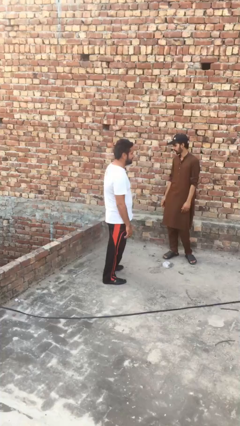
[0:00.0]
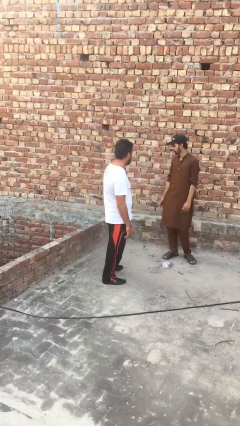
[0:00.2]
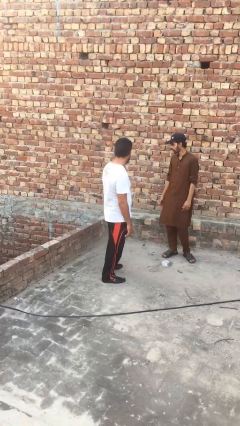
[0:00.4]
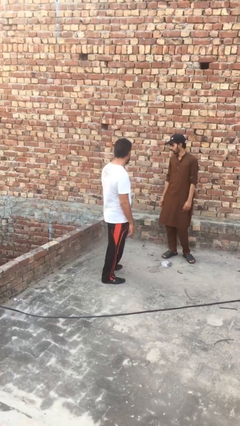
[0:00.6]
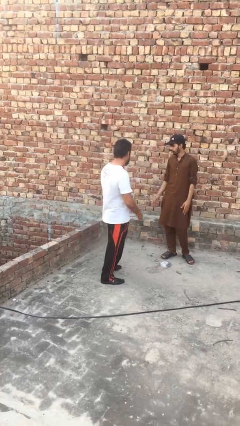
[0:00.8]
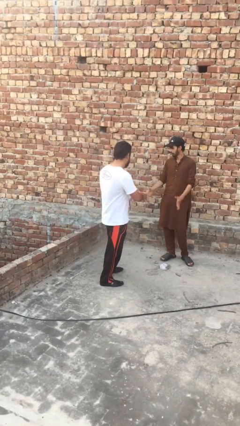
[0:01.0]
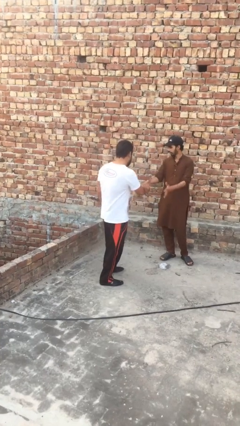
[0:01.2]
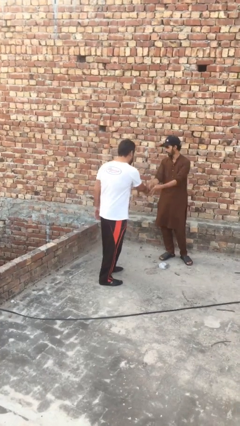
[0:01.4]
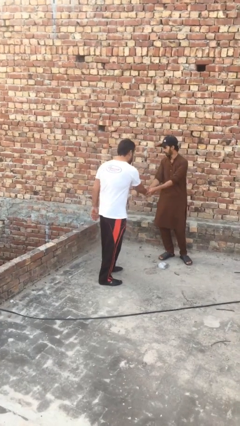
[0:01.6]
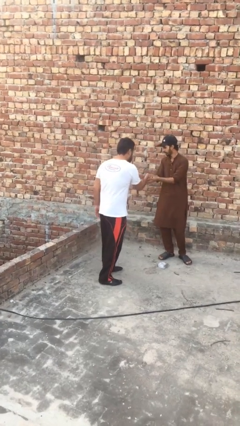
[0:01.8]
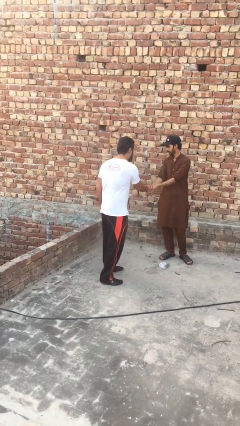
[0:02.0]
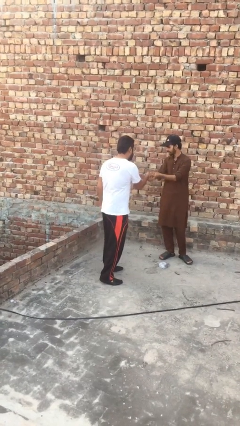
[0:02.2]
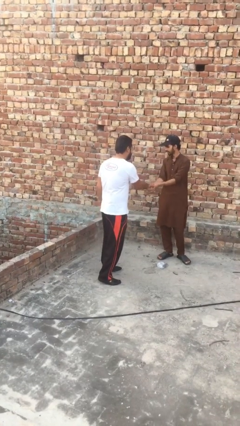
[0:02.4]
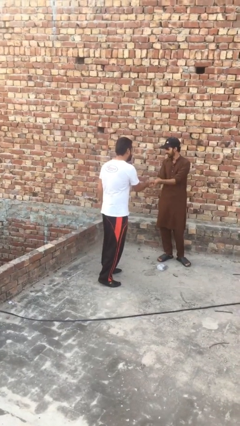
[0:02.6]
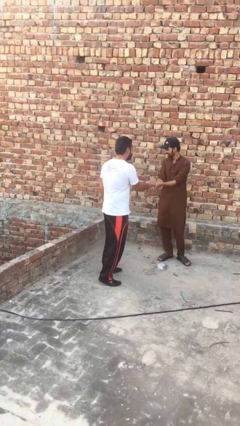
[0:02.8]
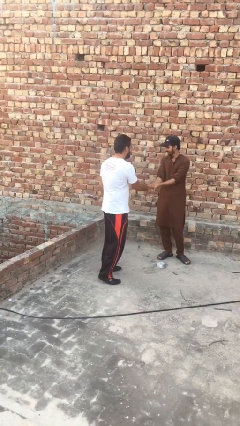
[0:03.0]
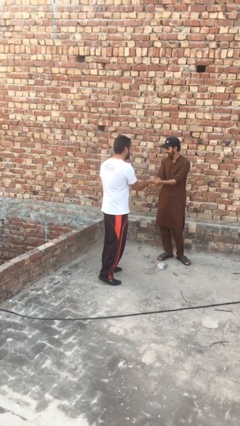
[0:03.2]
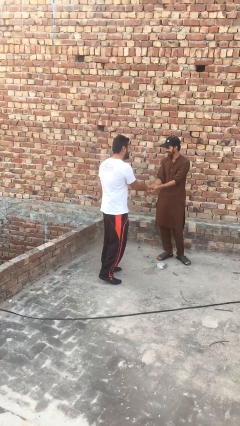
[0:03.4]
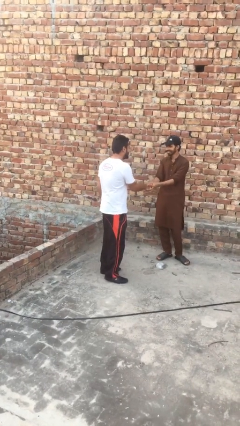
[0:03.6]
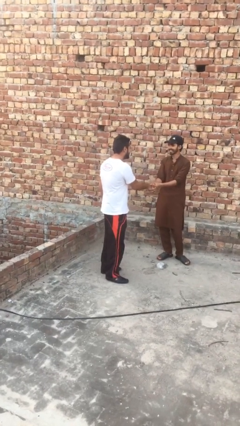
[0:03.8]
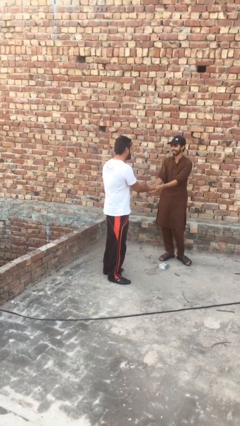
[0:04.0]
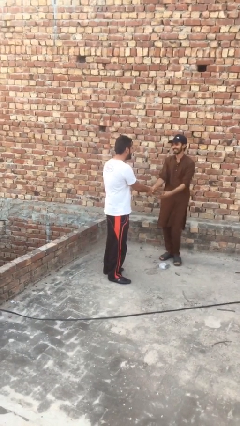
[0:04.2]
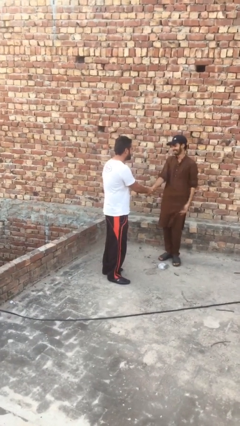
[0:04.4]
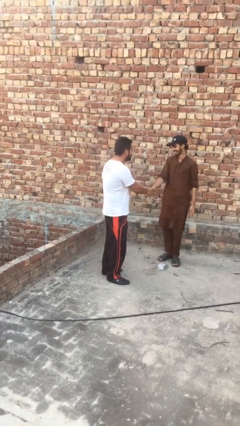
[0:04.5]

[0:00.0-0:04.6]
person shakes hand

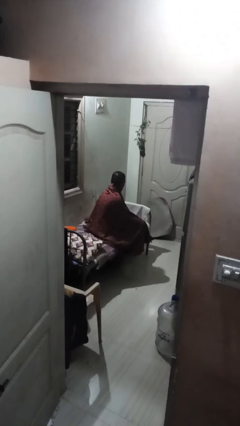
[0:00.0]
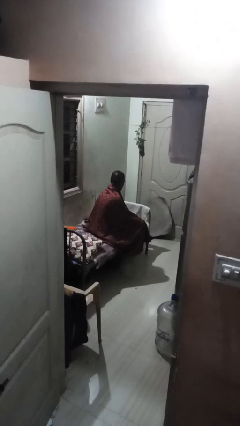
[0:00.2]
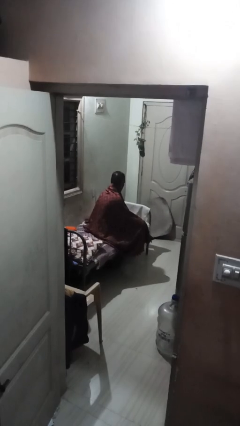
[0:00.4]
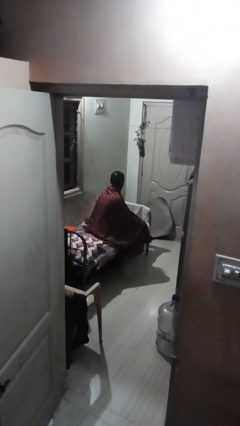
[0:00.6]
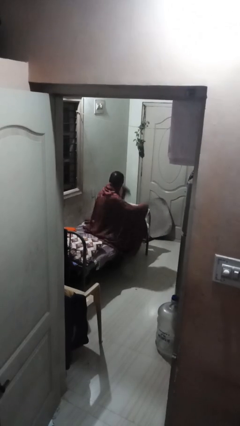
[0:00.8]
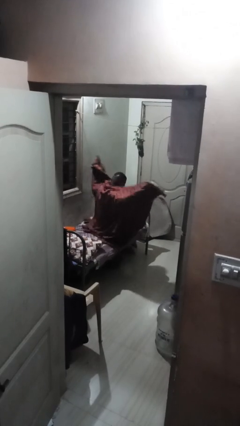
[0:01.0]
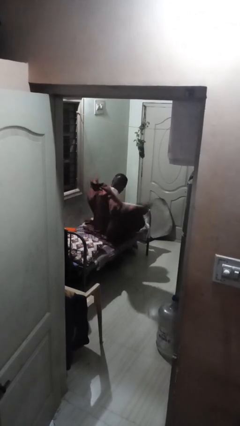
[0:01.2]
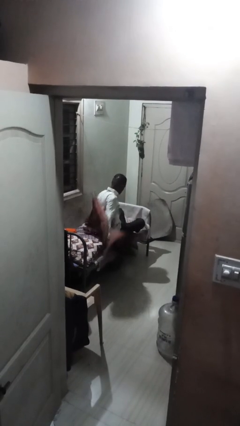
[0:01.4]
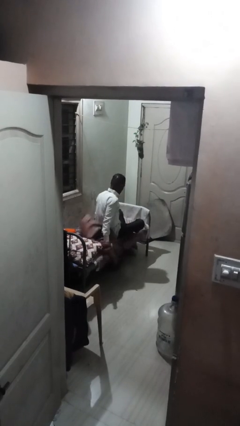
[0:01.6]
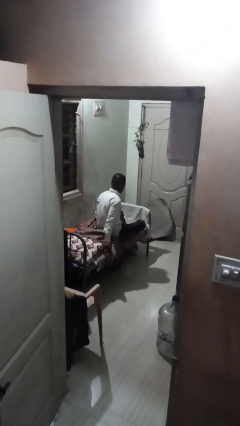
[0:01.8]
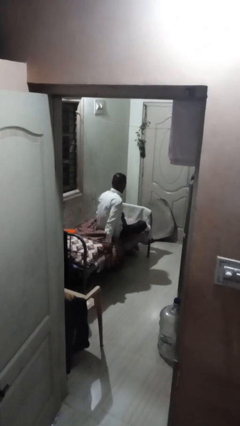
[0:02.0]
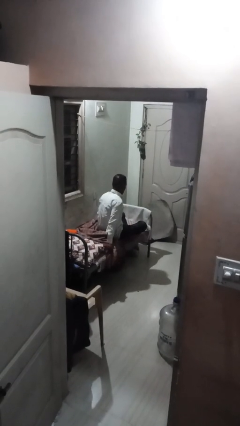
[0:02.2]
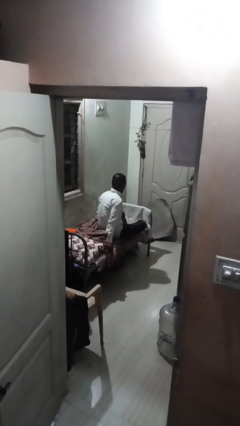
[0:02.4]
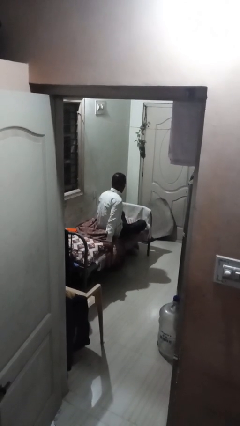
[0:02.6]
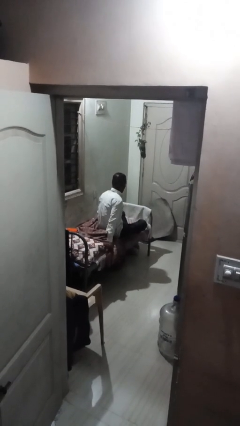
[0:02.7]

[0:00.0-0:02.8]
person uncovers with blanket

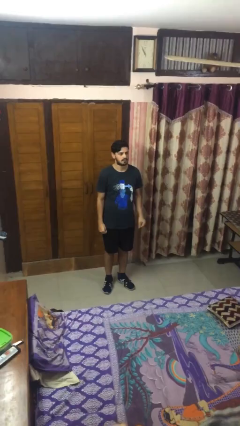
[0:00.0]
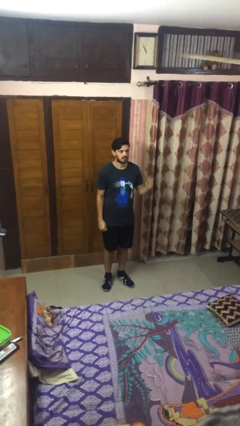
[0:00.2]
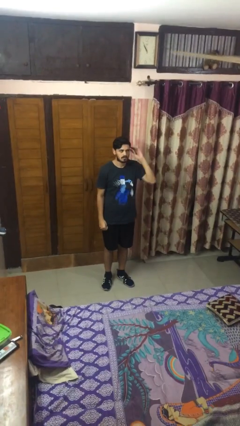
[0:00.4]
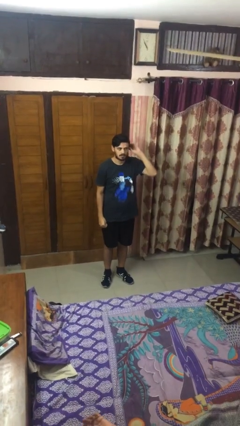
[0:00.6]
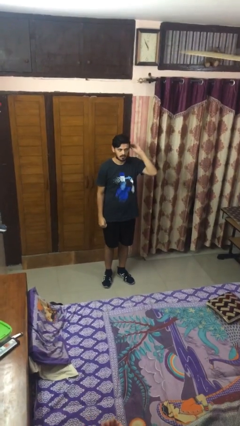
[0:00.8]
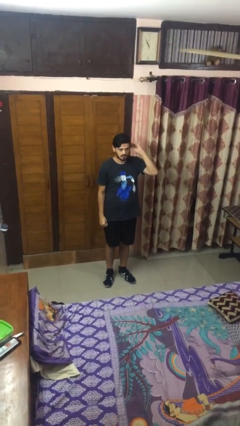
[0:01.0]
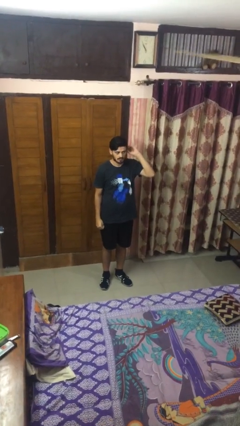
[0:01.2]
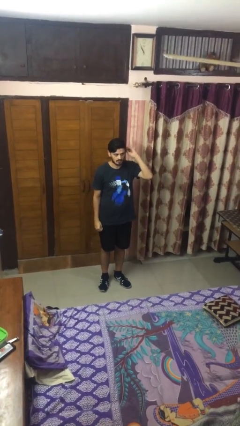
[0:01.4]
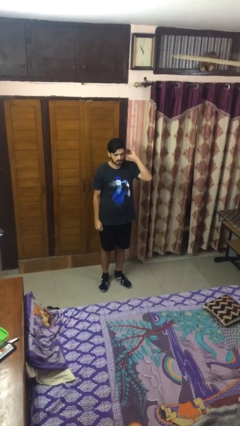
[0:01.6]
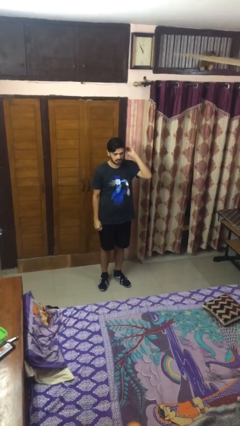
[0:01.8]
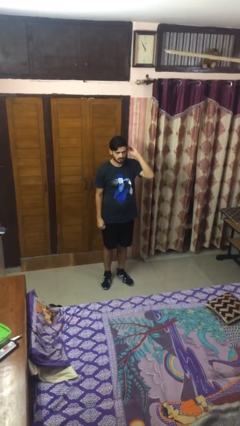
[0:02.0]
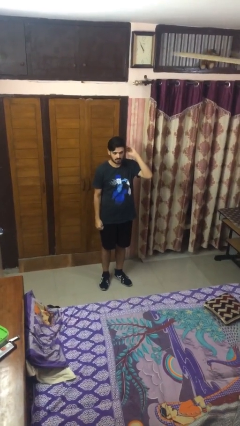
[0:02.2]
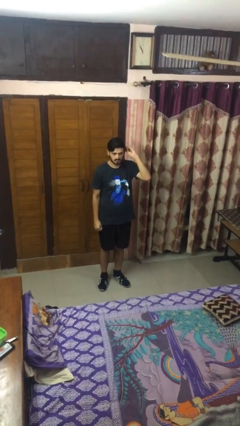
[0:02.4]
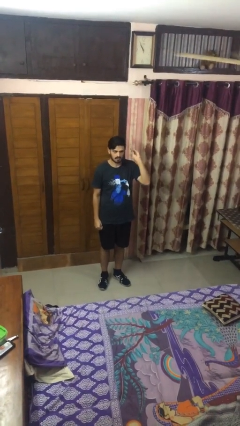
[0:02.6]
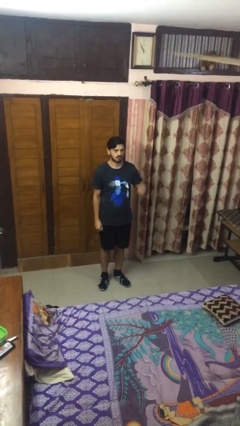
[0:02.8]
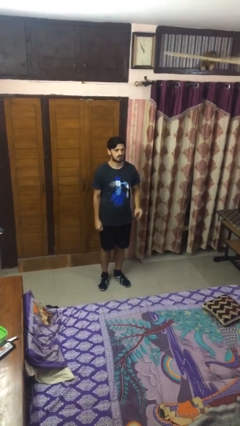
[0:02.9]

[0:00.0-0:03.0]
person touches earlobe

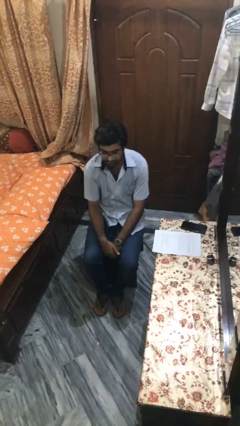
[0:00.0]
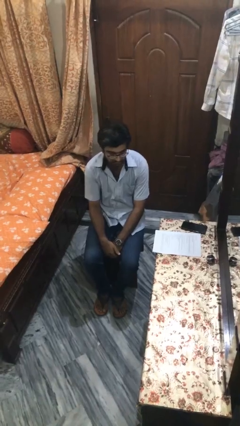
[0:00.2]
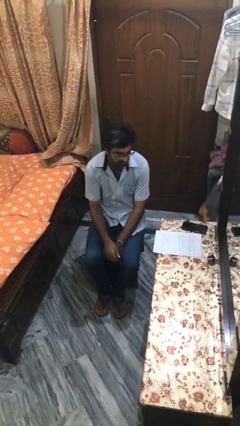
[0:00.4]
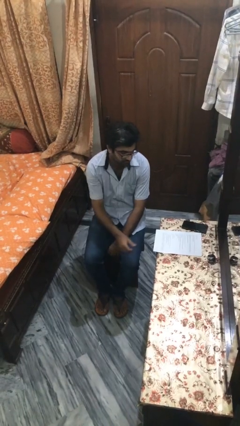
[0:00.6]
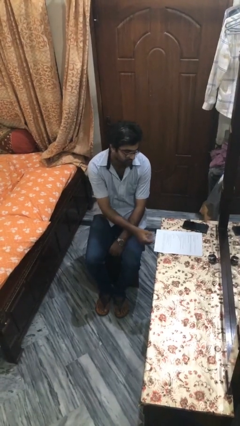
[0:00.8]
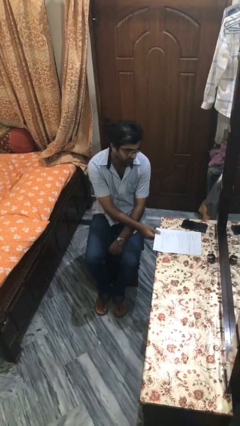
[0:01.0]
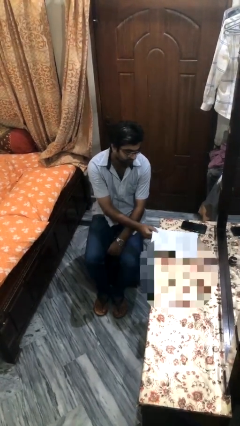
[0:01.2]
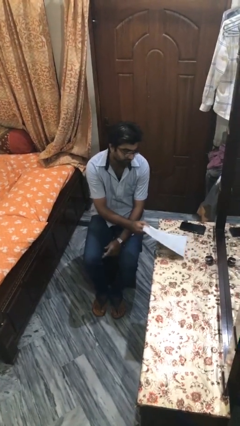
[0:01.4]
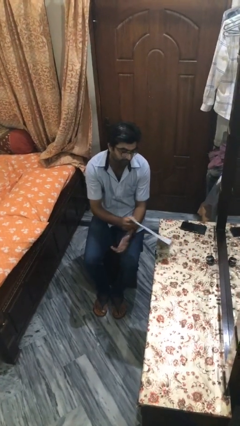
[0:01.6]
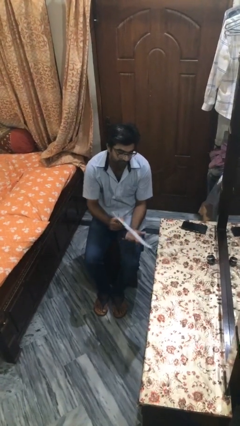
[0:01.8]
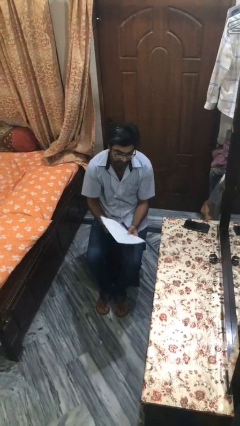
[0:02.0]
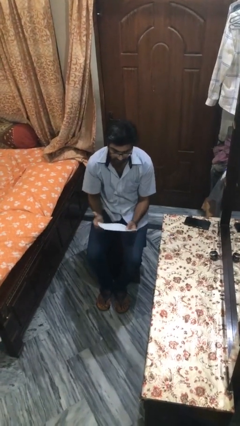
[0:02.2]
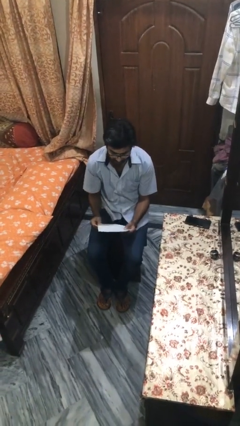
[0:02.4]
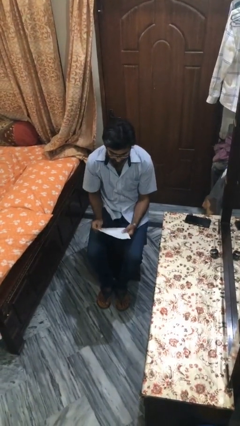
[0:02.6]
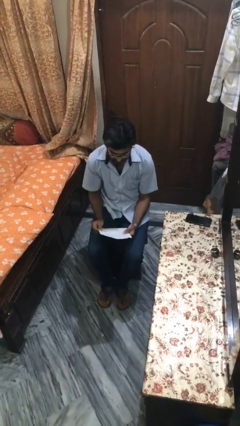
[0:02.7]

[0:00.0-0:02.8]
person picks up object from table

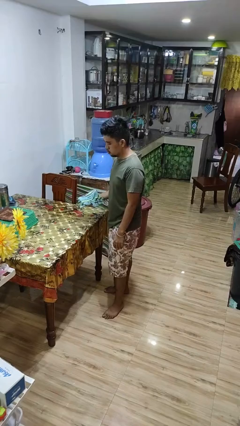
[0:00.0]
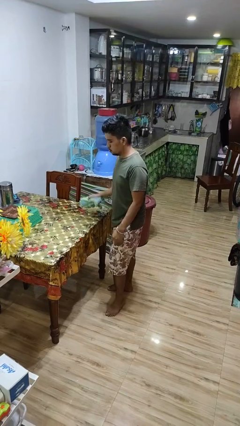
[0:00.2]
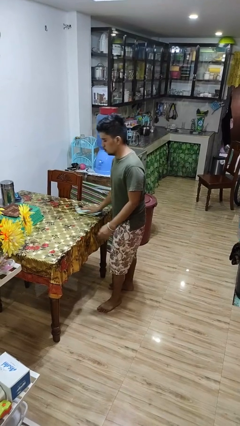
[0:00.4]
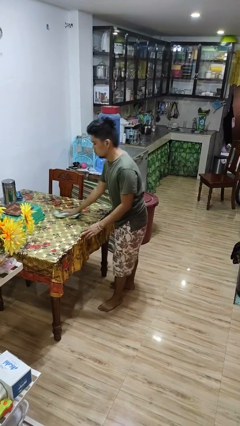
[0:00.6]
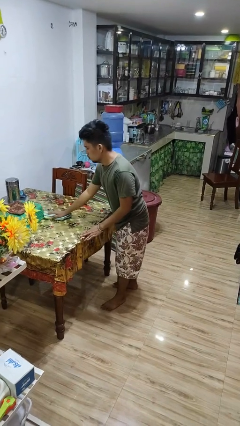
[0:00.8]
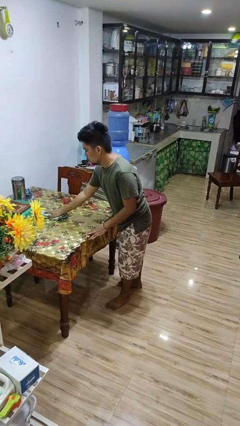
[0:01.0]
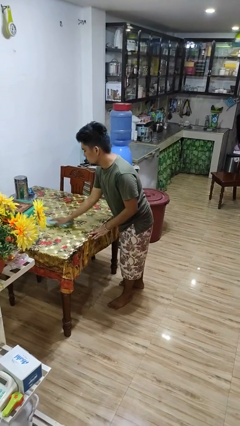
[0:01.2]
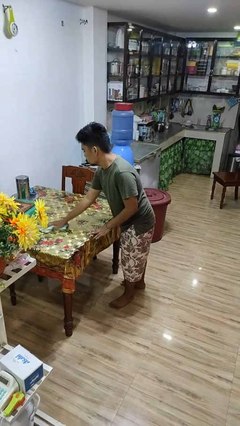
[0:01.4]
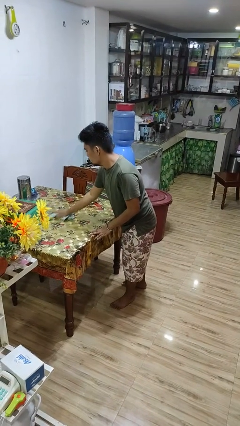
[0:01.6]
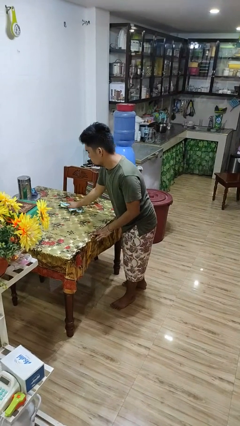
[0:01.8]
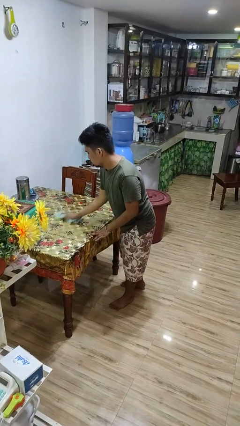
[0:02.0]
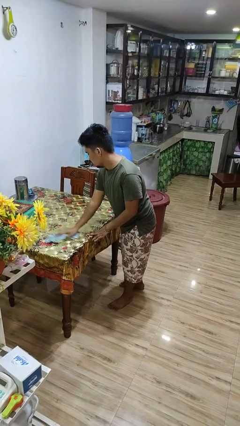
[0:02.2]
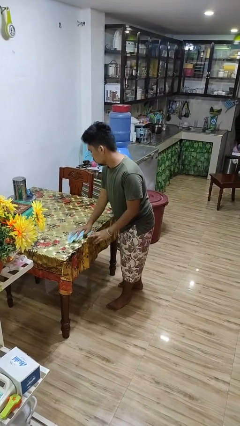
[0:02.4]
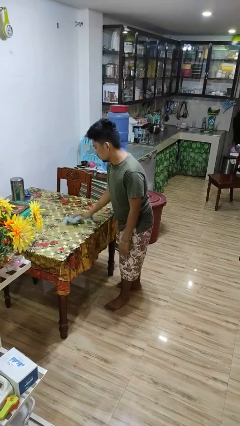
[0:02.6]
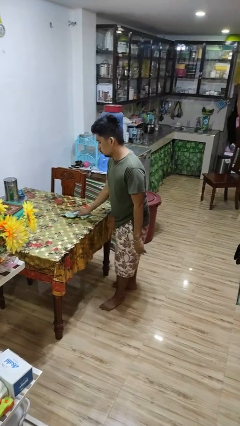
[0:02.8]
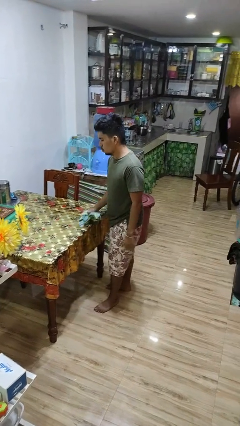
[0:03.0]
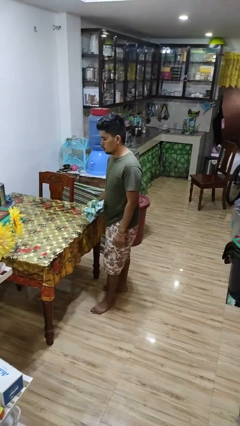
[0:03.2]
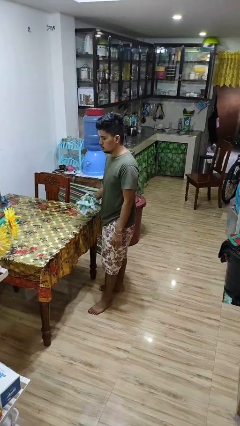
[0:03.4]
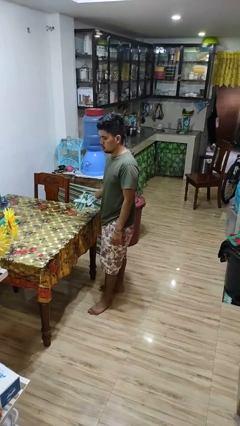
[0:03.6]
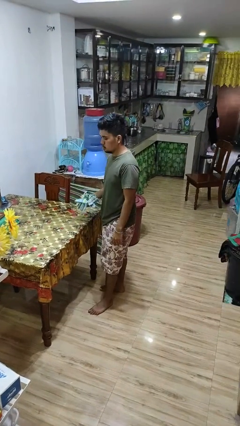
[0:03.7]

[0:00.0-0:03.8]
person cleans table with rag

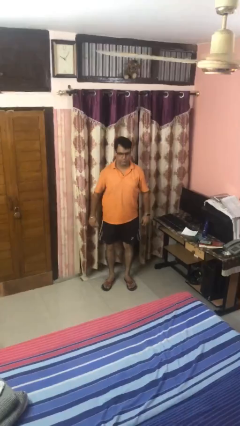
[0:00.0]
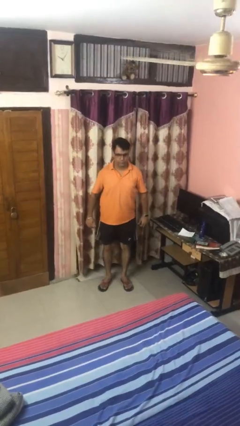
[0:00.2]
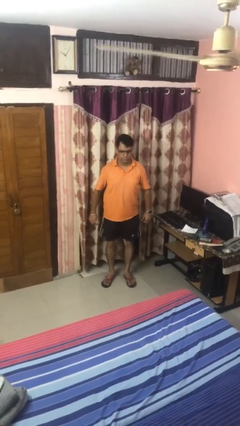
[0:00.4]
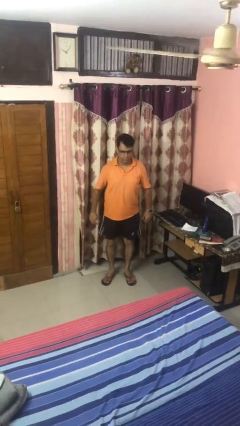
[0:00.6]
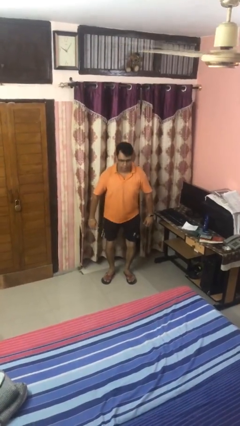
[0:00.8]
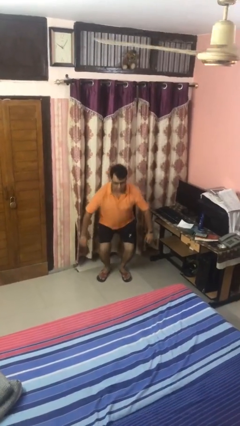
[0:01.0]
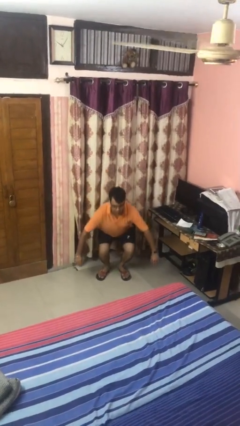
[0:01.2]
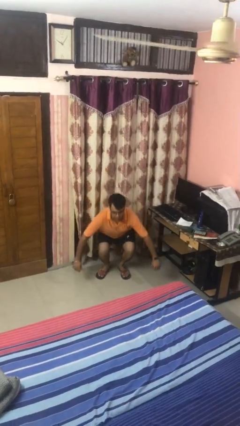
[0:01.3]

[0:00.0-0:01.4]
person squats
